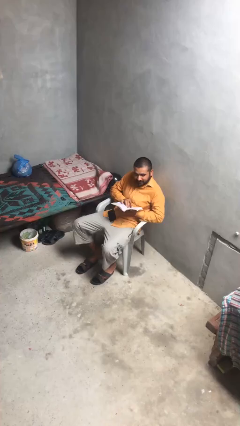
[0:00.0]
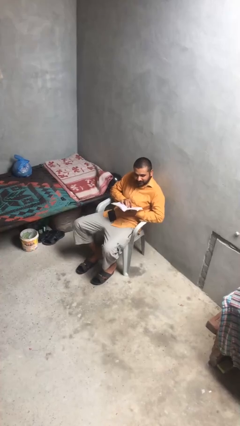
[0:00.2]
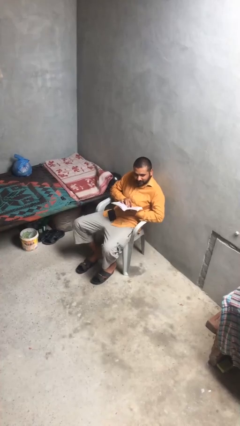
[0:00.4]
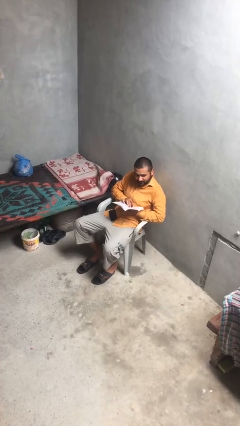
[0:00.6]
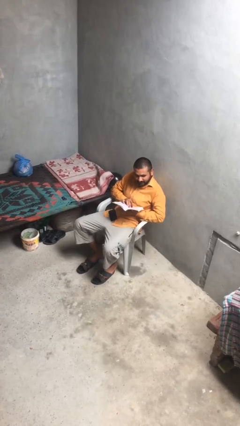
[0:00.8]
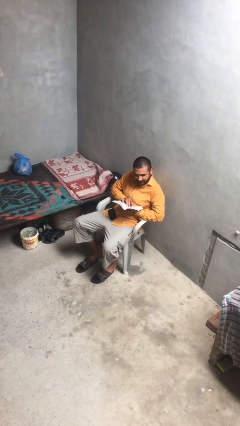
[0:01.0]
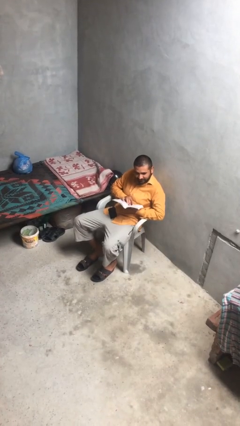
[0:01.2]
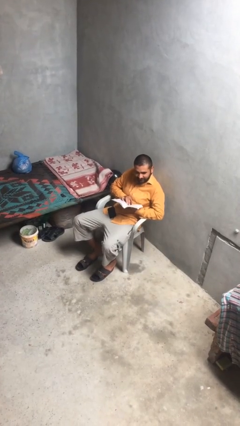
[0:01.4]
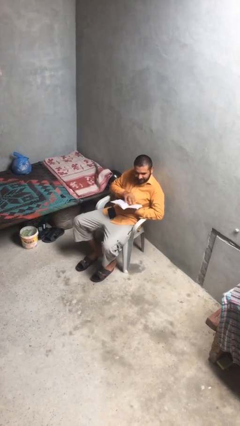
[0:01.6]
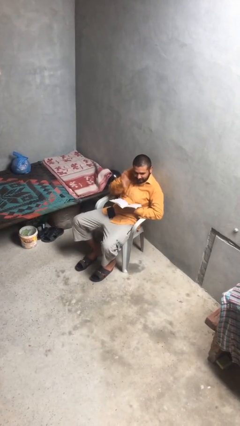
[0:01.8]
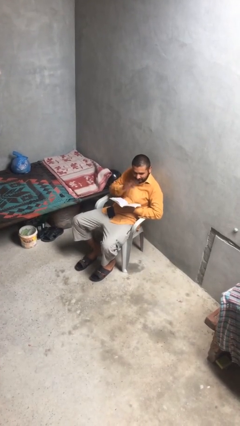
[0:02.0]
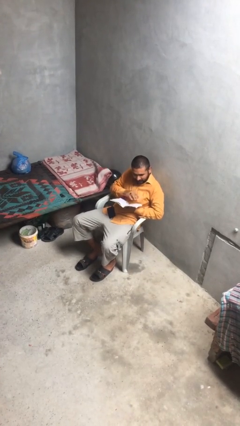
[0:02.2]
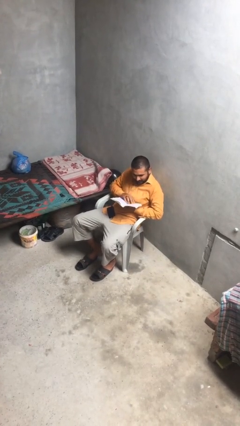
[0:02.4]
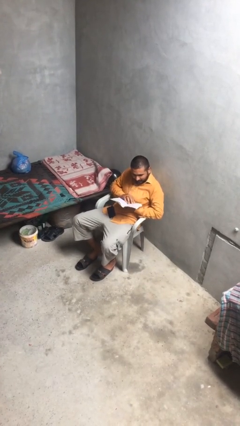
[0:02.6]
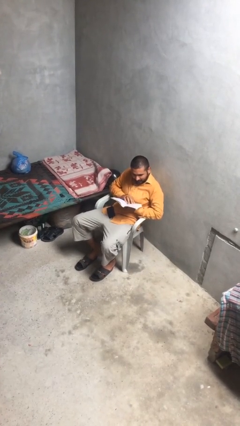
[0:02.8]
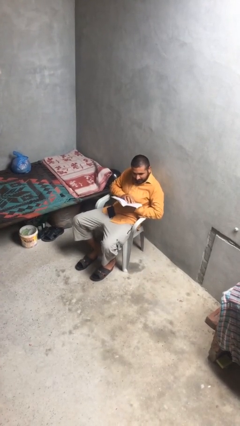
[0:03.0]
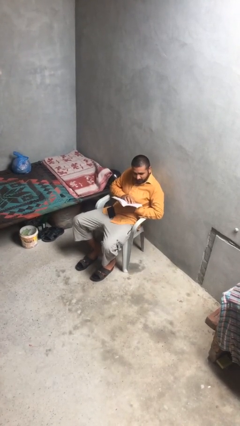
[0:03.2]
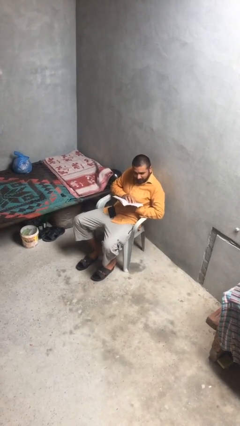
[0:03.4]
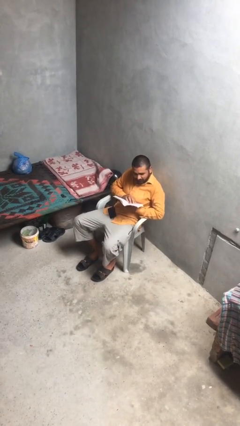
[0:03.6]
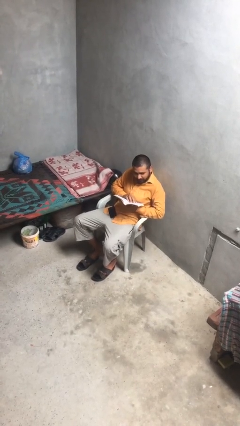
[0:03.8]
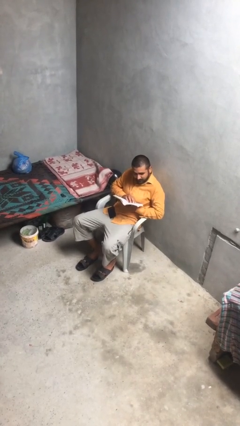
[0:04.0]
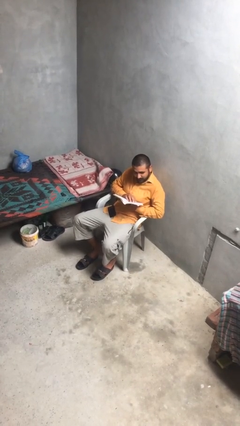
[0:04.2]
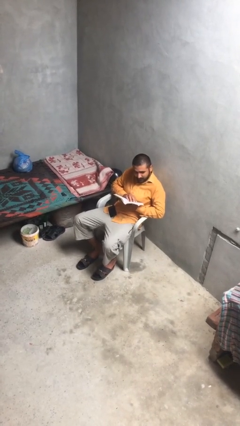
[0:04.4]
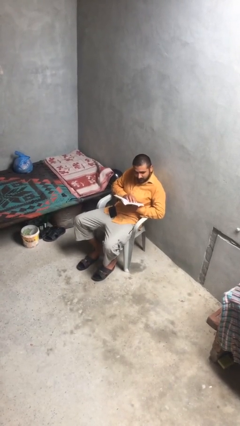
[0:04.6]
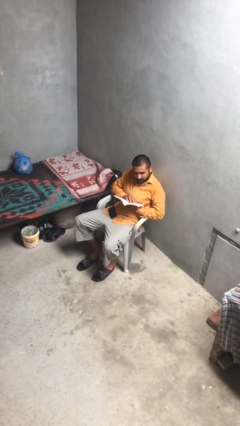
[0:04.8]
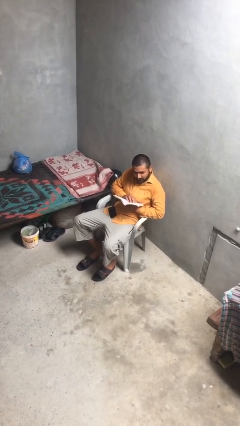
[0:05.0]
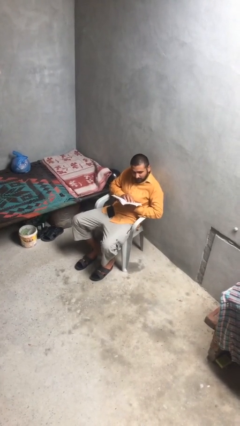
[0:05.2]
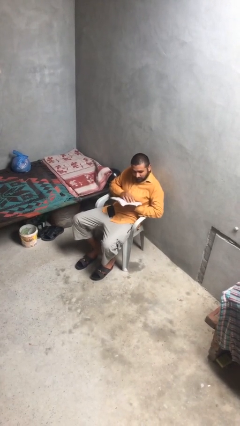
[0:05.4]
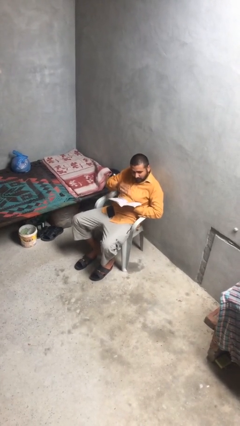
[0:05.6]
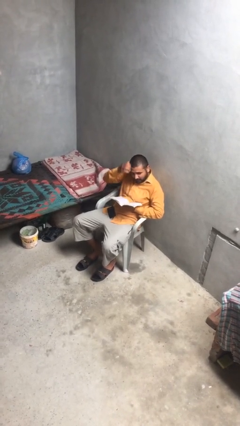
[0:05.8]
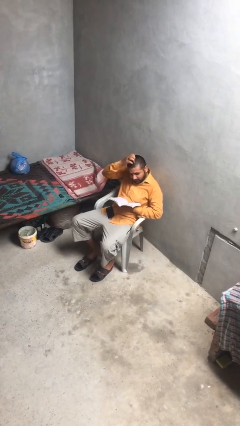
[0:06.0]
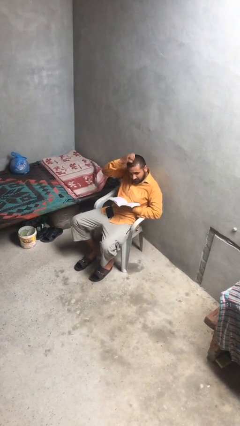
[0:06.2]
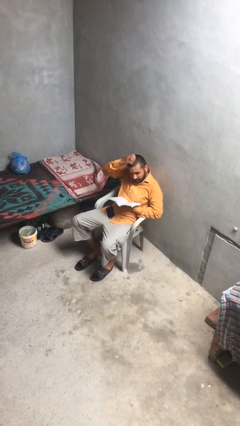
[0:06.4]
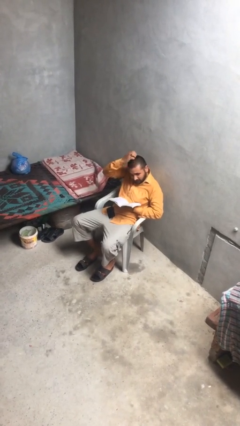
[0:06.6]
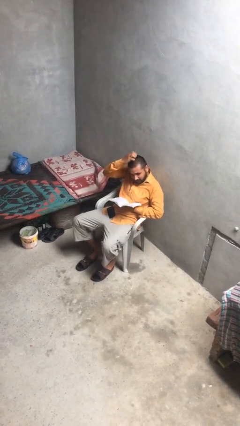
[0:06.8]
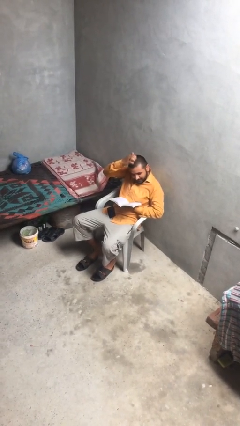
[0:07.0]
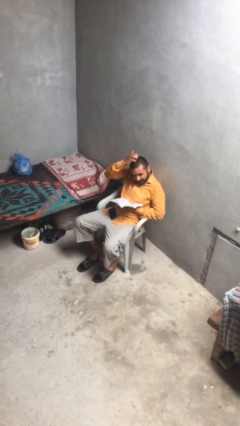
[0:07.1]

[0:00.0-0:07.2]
person reads document

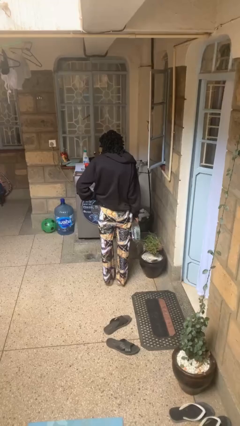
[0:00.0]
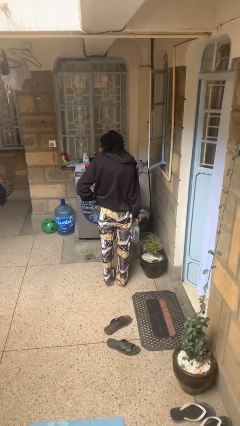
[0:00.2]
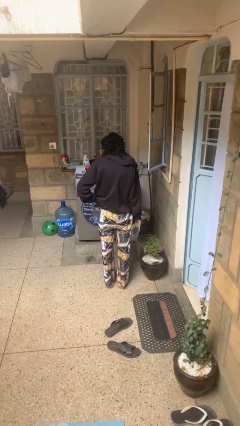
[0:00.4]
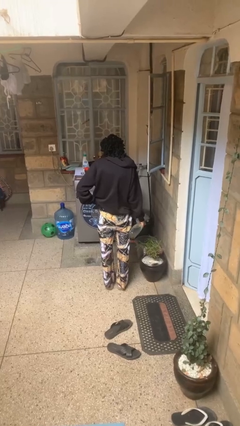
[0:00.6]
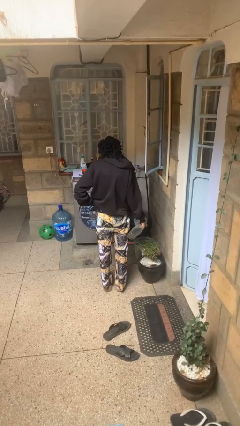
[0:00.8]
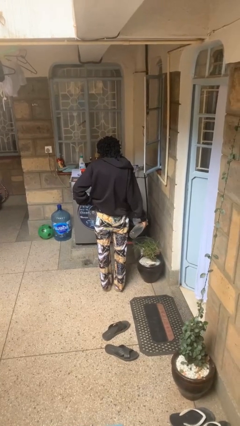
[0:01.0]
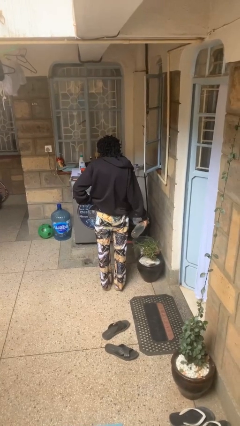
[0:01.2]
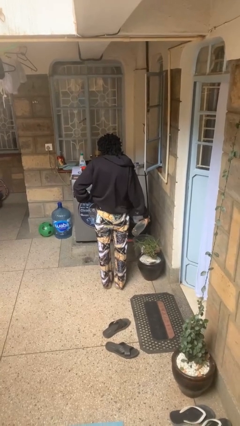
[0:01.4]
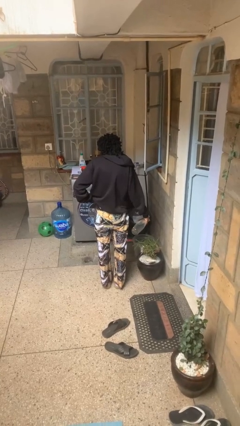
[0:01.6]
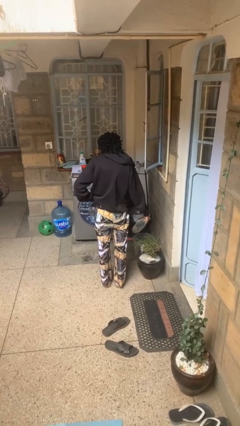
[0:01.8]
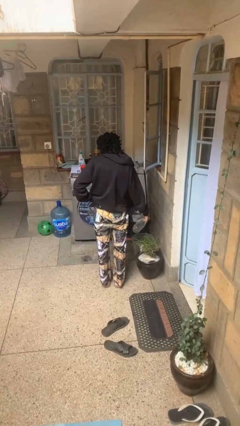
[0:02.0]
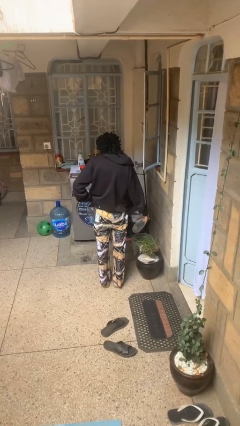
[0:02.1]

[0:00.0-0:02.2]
person waters houseplant

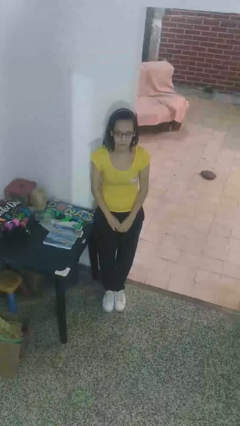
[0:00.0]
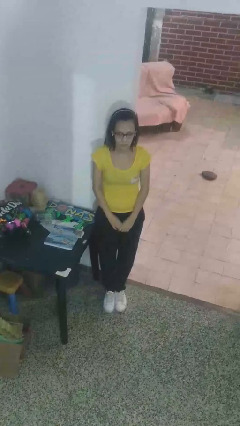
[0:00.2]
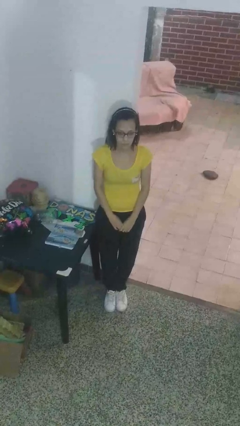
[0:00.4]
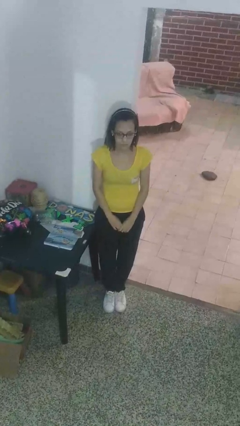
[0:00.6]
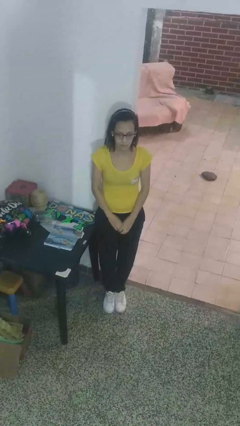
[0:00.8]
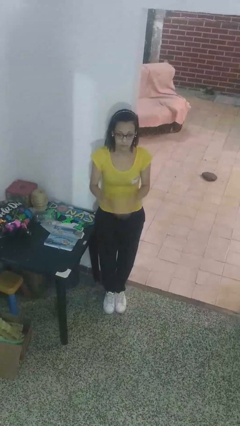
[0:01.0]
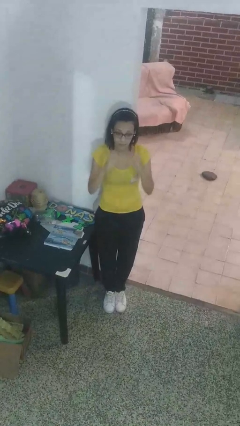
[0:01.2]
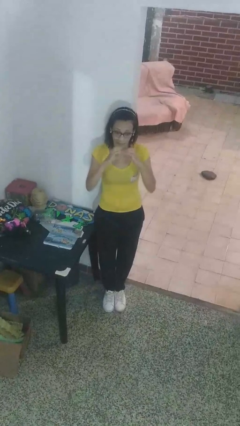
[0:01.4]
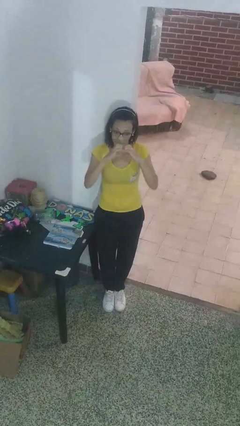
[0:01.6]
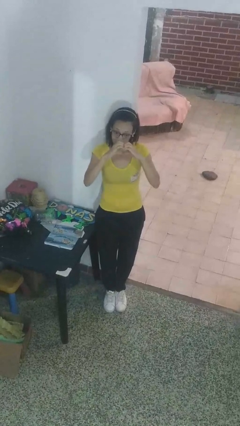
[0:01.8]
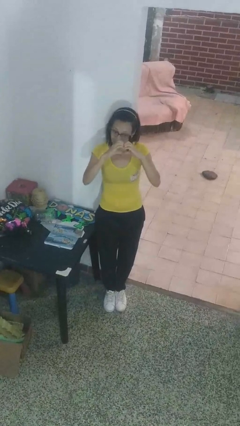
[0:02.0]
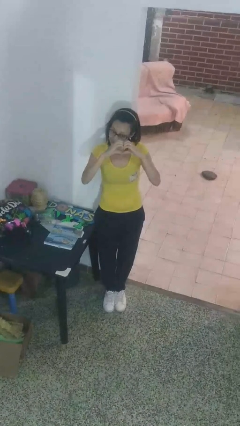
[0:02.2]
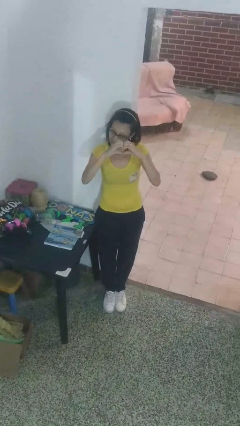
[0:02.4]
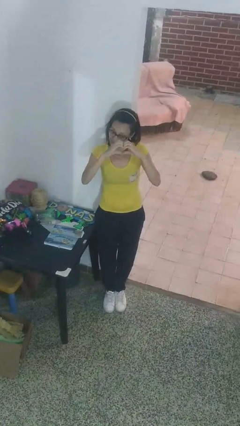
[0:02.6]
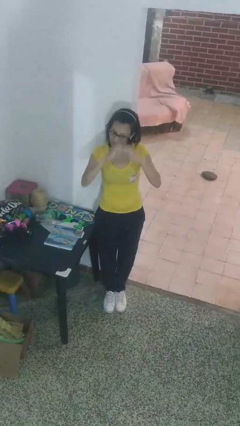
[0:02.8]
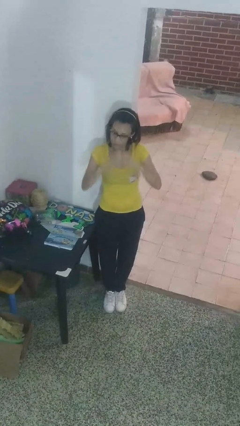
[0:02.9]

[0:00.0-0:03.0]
person gestures heart

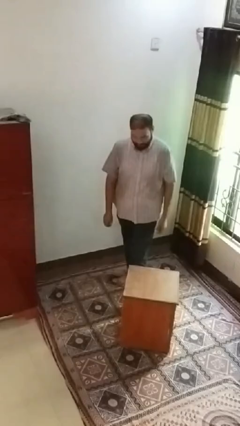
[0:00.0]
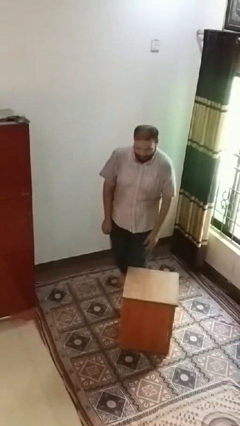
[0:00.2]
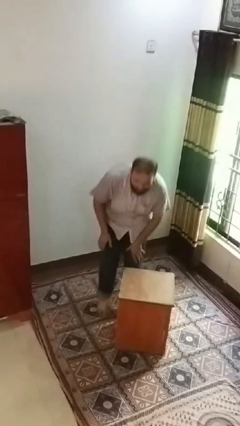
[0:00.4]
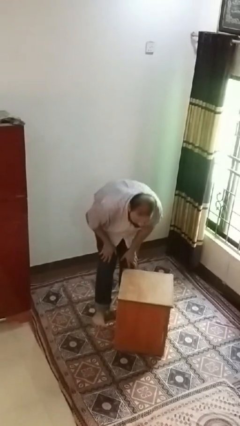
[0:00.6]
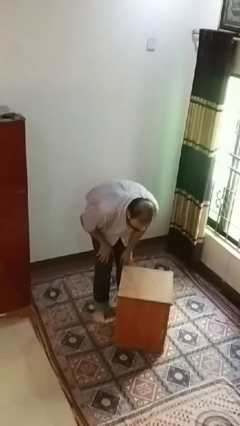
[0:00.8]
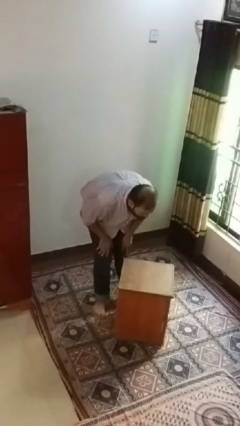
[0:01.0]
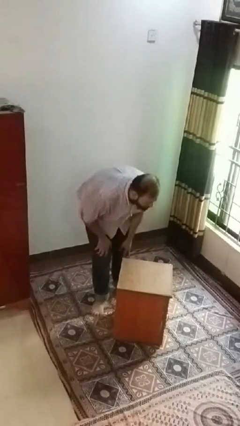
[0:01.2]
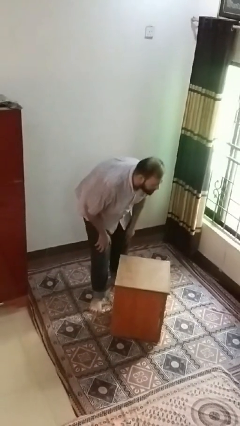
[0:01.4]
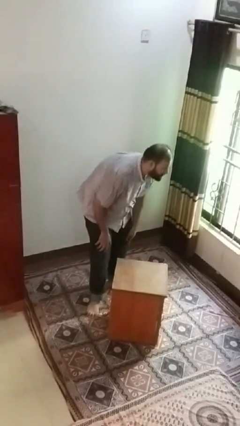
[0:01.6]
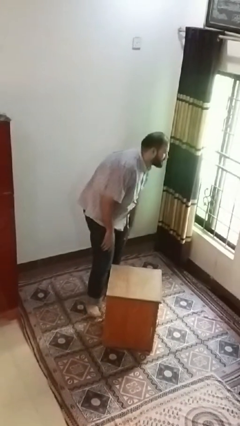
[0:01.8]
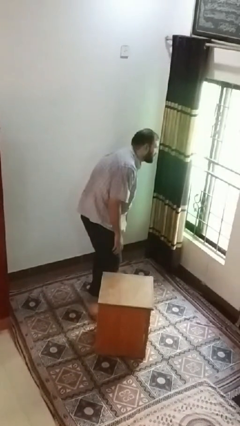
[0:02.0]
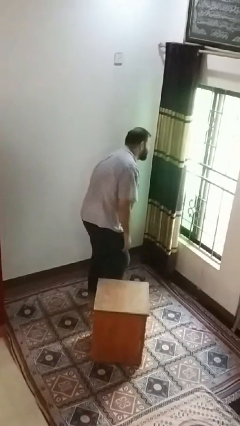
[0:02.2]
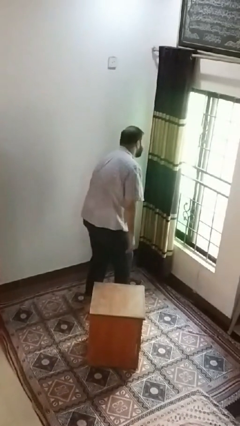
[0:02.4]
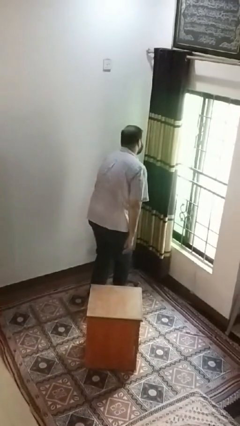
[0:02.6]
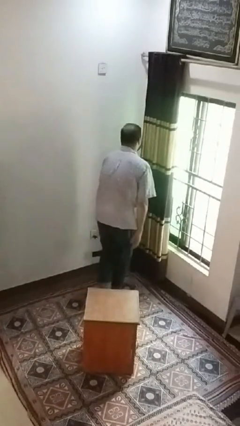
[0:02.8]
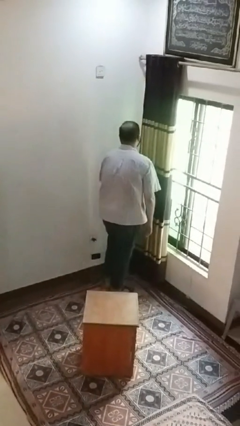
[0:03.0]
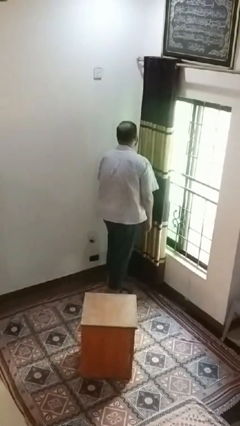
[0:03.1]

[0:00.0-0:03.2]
person bumps into table

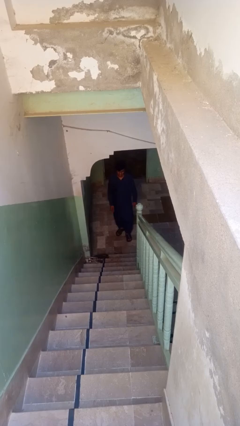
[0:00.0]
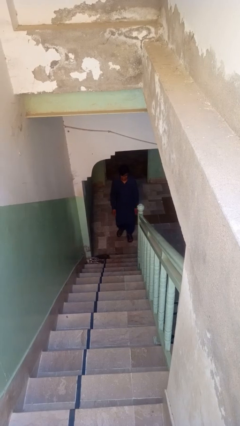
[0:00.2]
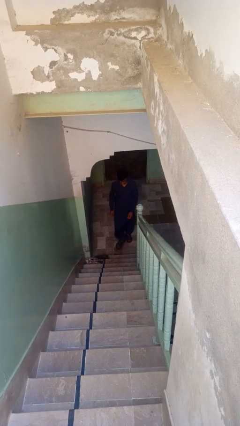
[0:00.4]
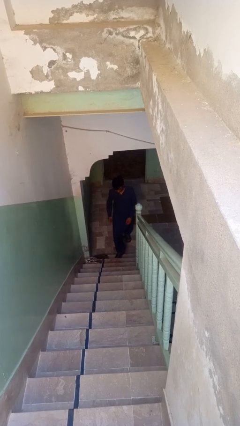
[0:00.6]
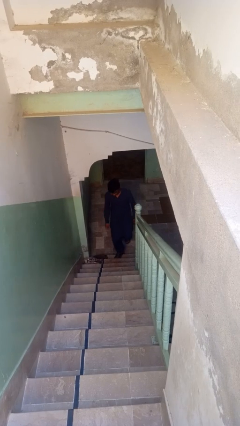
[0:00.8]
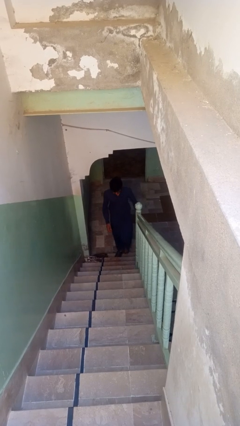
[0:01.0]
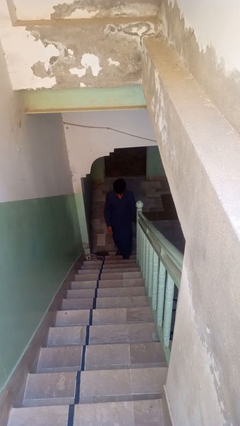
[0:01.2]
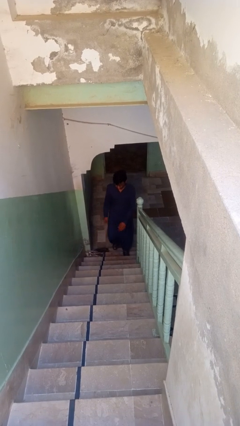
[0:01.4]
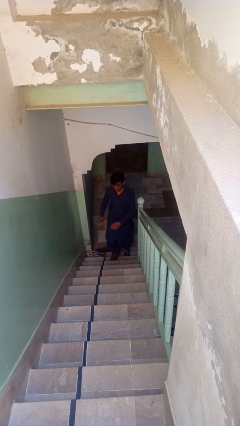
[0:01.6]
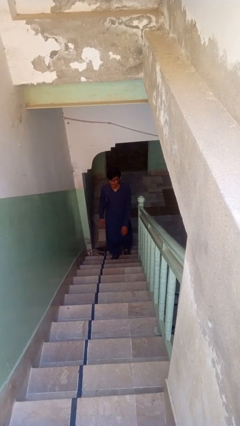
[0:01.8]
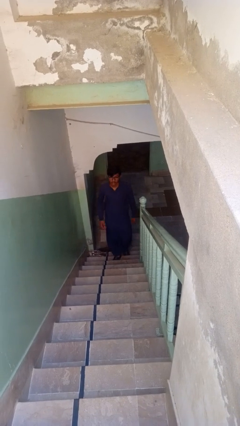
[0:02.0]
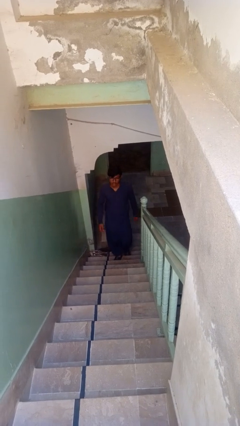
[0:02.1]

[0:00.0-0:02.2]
person climbs up stairs
